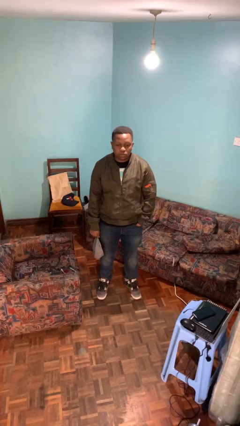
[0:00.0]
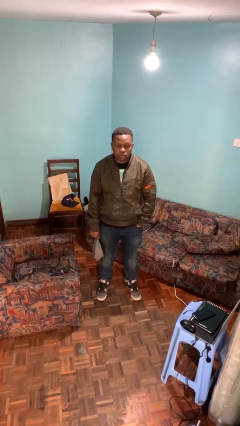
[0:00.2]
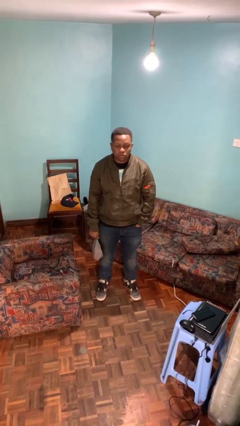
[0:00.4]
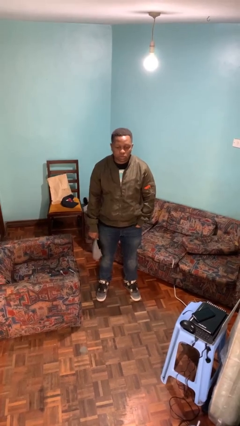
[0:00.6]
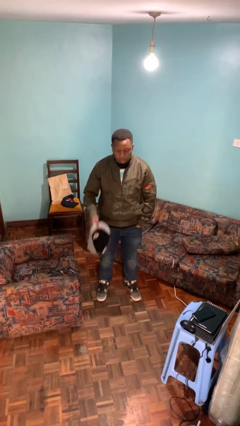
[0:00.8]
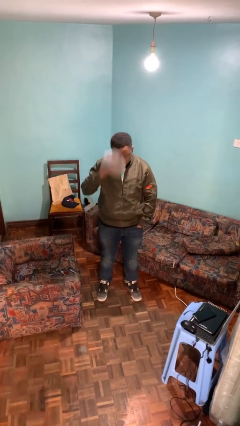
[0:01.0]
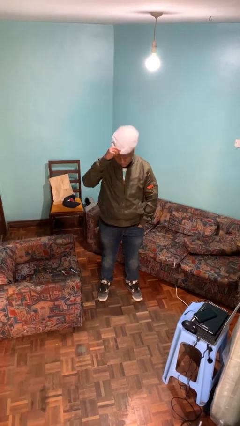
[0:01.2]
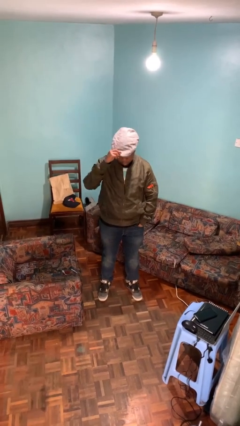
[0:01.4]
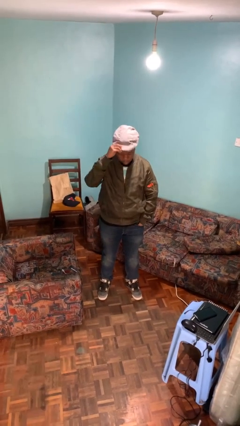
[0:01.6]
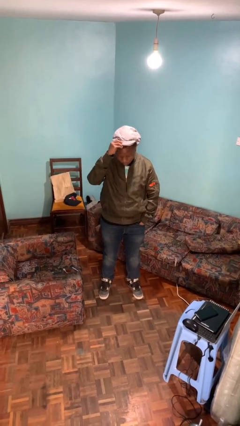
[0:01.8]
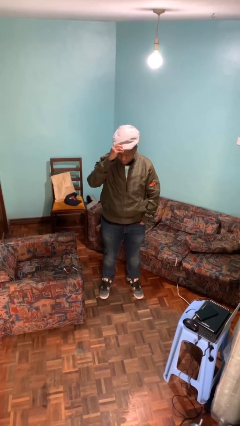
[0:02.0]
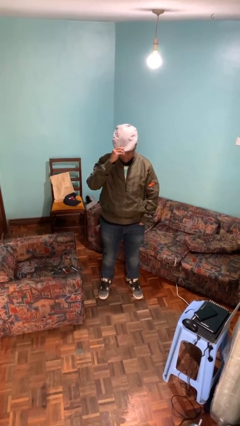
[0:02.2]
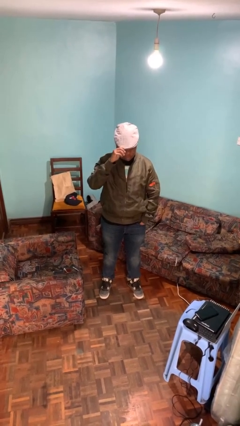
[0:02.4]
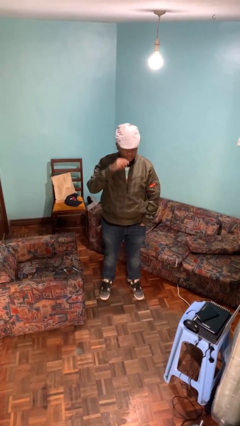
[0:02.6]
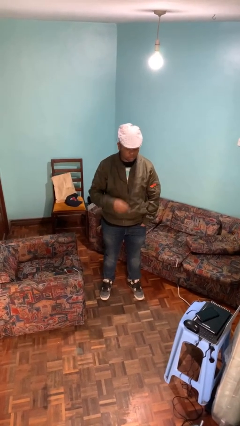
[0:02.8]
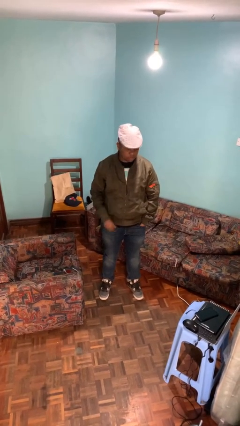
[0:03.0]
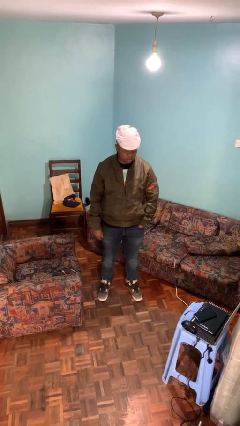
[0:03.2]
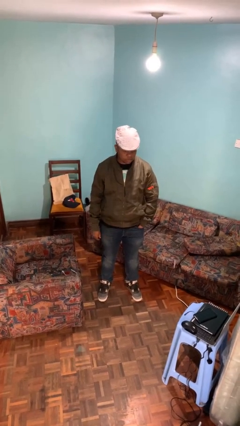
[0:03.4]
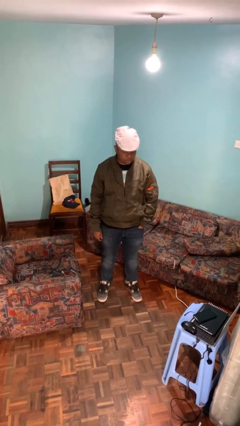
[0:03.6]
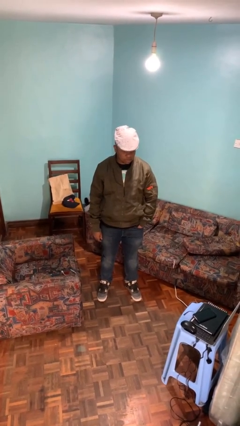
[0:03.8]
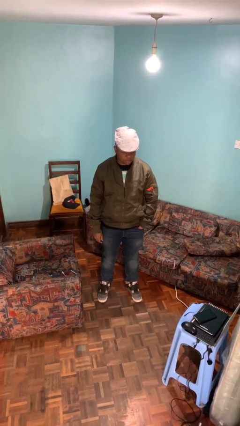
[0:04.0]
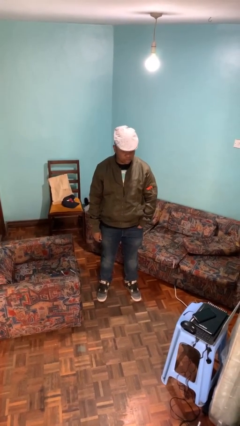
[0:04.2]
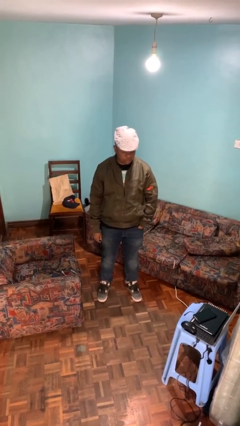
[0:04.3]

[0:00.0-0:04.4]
person puts on hat

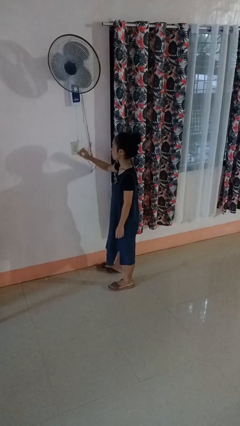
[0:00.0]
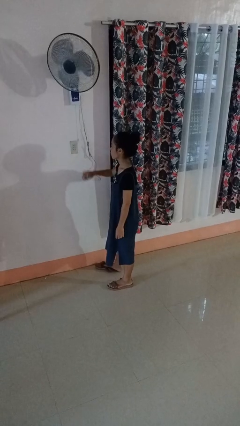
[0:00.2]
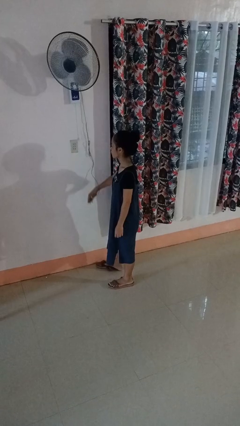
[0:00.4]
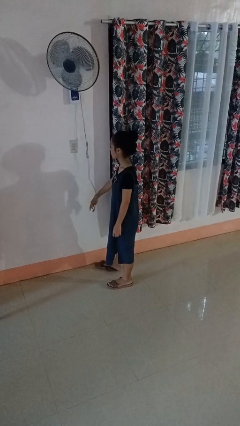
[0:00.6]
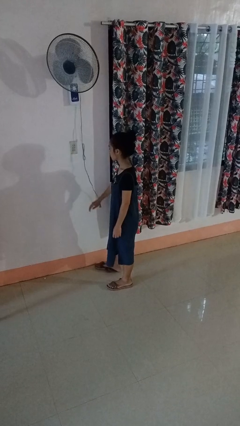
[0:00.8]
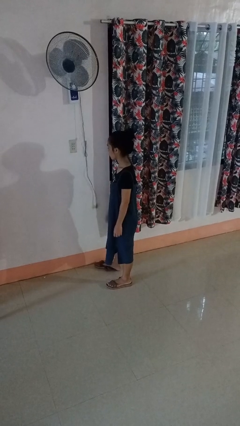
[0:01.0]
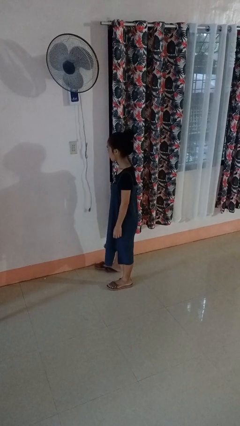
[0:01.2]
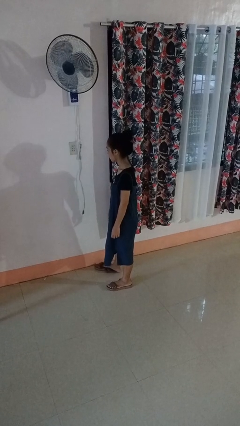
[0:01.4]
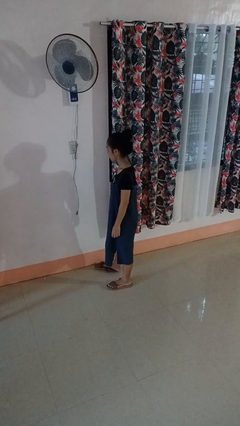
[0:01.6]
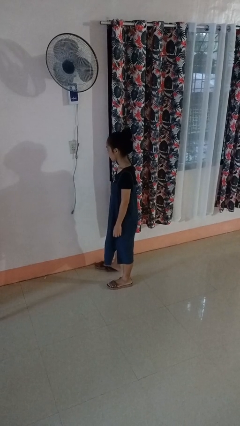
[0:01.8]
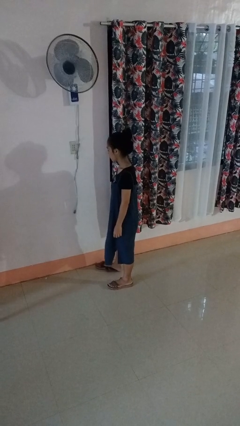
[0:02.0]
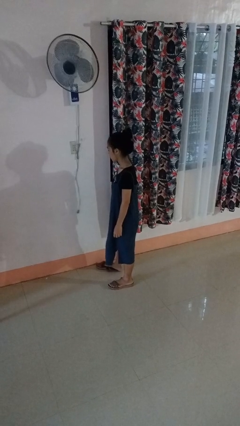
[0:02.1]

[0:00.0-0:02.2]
person unplugs from electrical socket

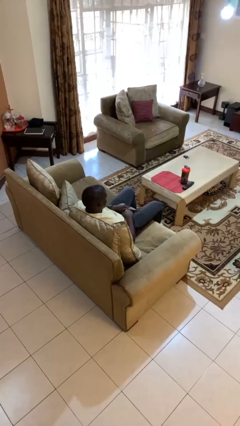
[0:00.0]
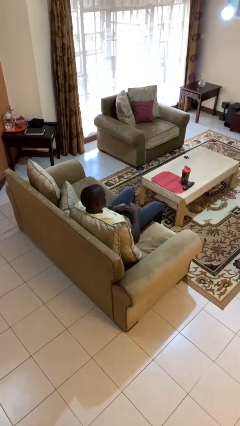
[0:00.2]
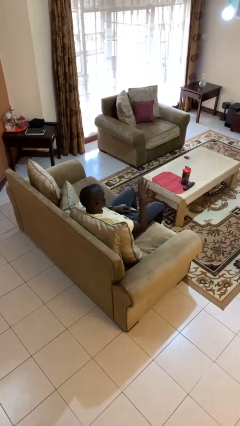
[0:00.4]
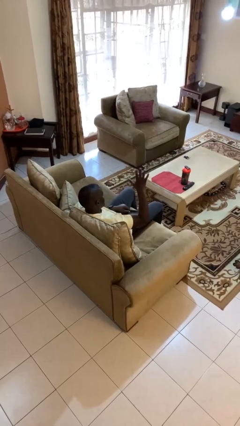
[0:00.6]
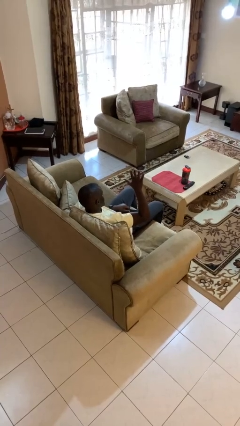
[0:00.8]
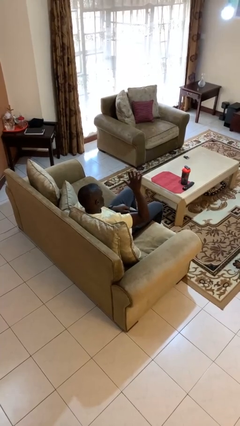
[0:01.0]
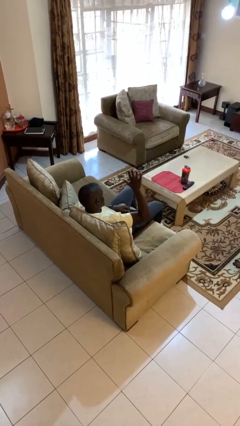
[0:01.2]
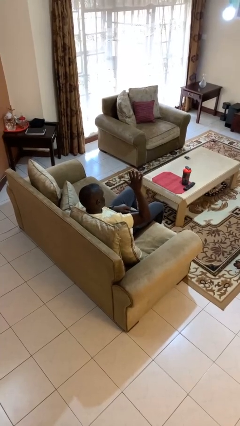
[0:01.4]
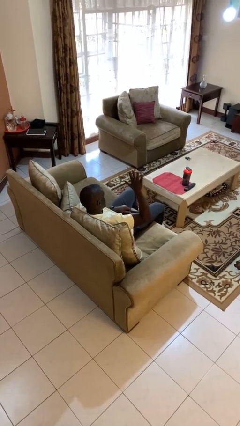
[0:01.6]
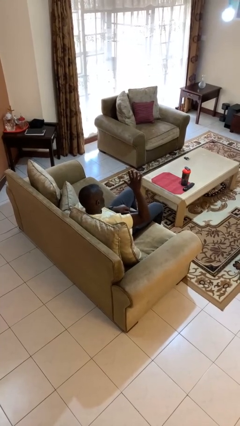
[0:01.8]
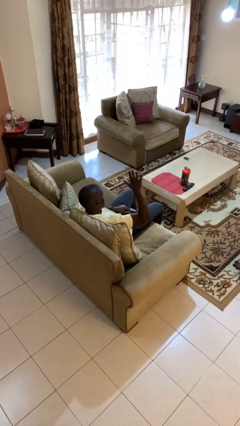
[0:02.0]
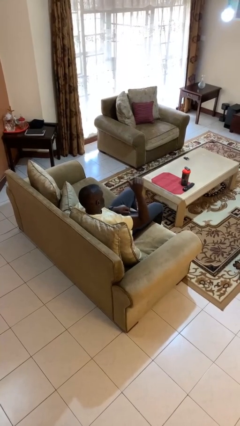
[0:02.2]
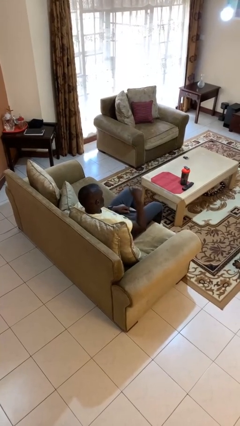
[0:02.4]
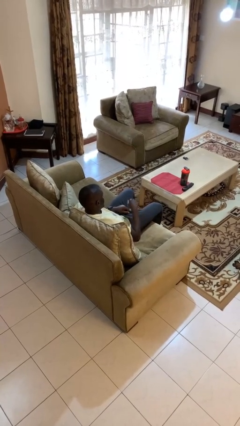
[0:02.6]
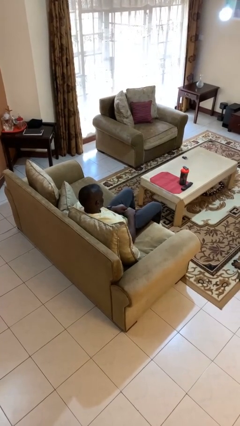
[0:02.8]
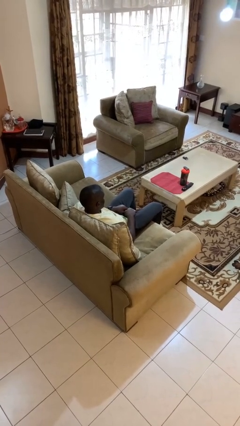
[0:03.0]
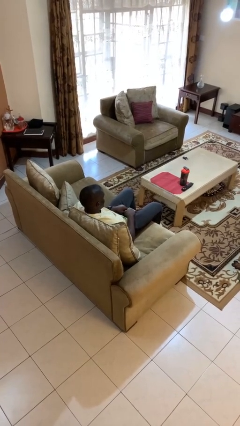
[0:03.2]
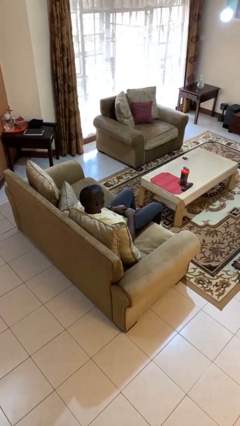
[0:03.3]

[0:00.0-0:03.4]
person gestures number five

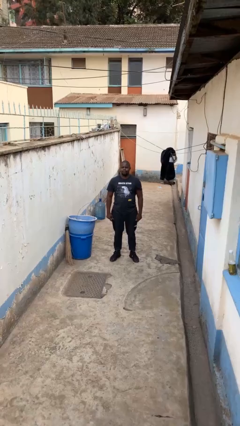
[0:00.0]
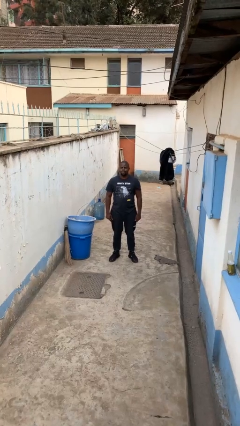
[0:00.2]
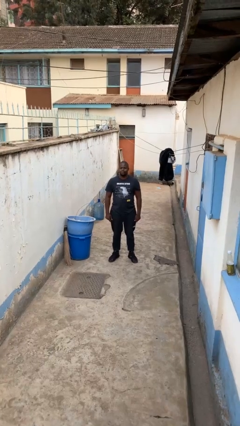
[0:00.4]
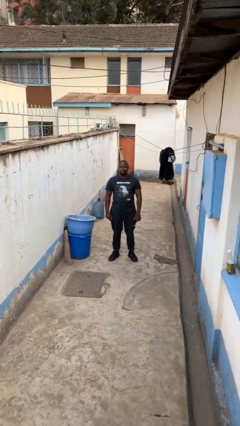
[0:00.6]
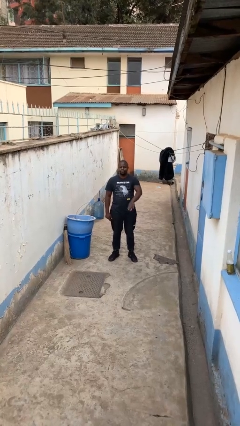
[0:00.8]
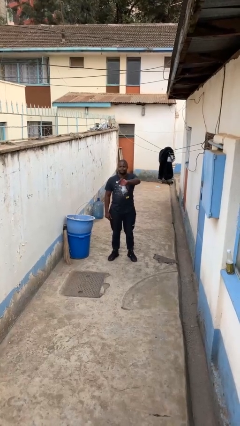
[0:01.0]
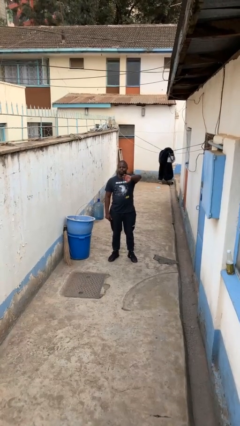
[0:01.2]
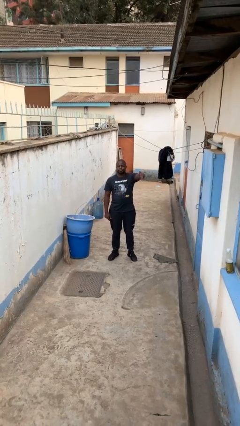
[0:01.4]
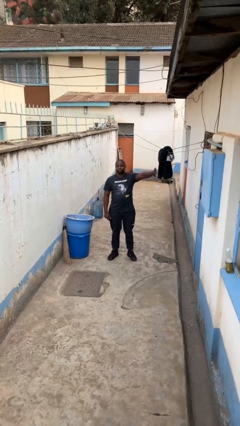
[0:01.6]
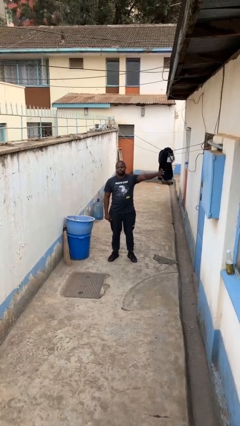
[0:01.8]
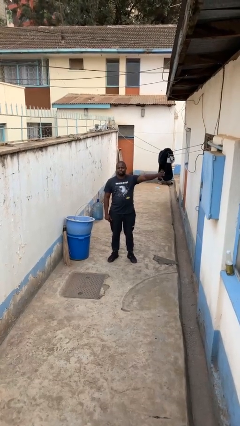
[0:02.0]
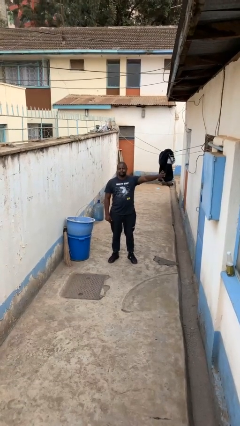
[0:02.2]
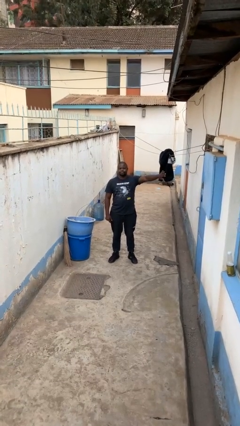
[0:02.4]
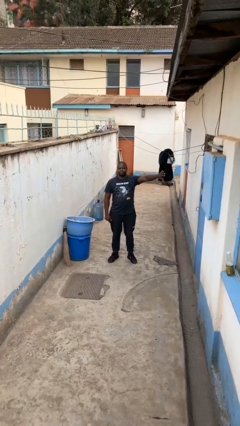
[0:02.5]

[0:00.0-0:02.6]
person gestures swipe left

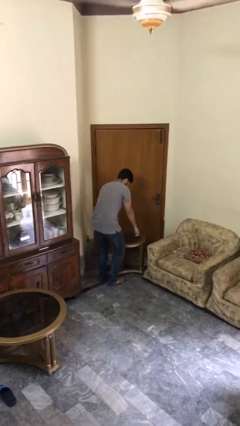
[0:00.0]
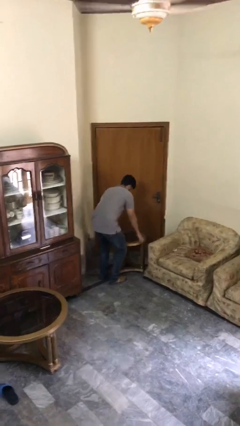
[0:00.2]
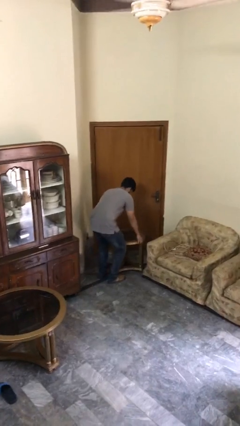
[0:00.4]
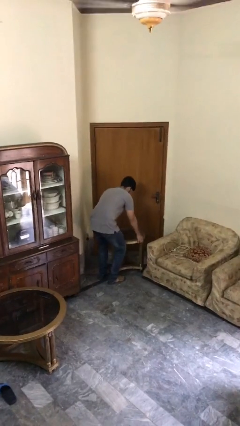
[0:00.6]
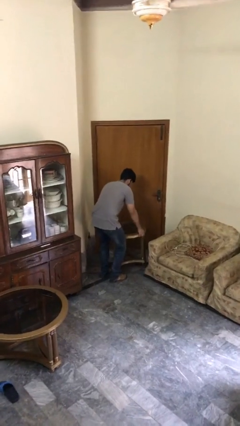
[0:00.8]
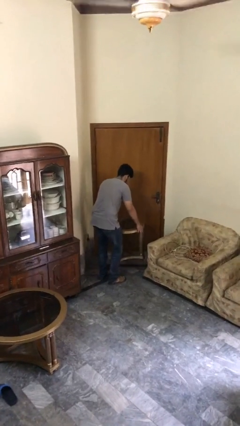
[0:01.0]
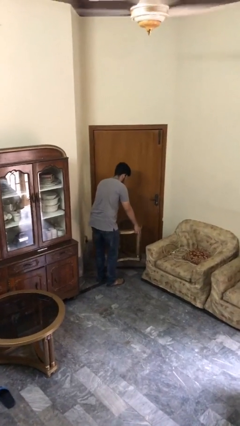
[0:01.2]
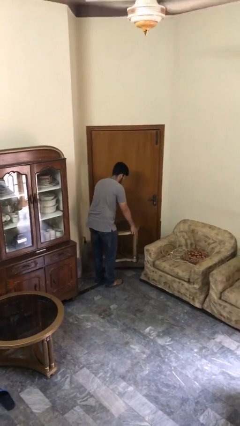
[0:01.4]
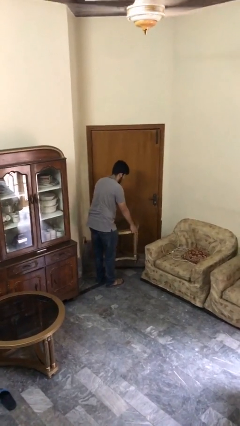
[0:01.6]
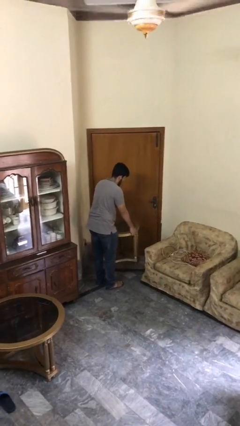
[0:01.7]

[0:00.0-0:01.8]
person picks up object from floor

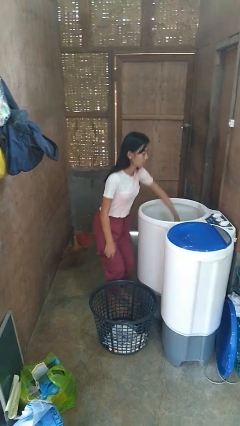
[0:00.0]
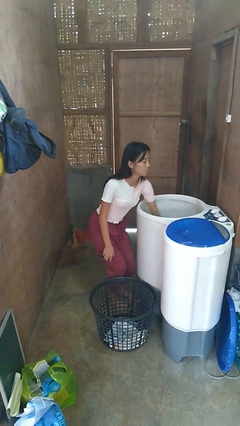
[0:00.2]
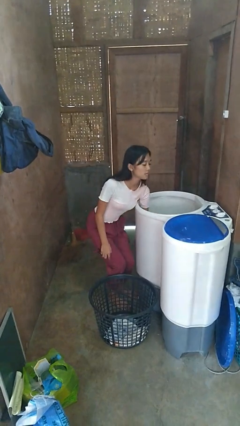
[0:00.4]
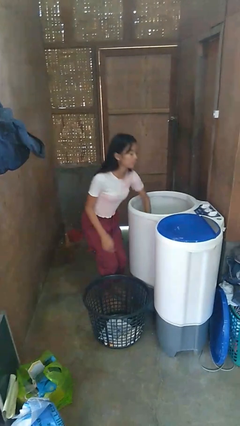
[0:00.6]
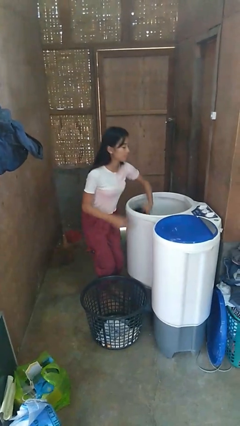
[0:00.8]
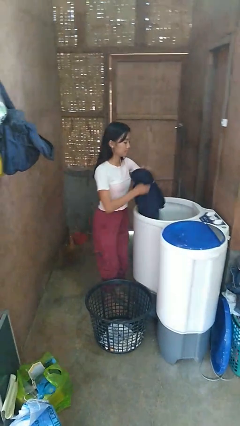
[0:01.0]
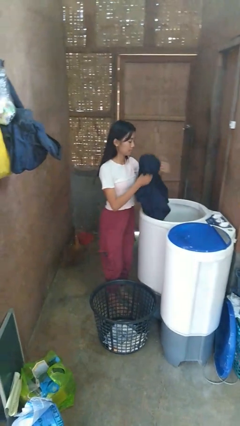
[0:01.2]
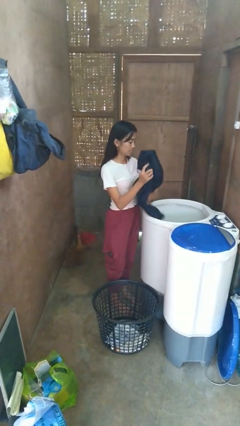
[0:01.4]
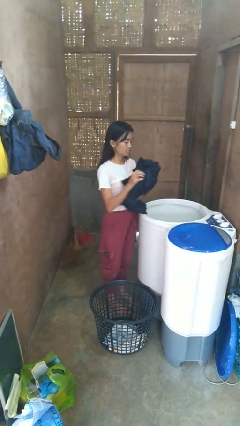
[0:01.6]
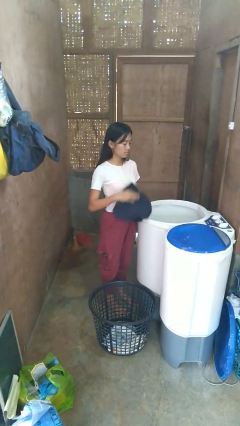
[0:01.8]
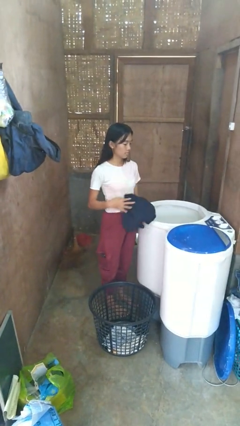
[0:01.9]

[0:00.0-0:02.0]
person unloads clotheswasher

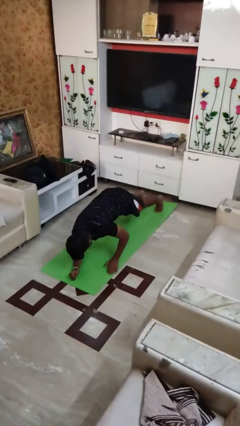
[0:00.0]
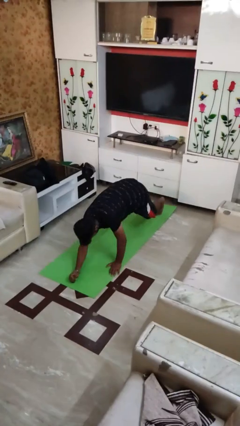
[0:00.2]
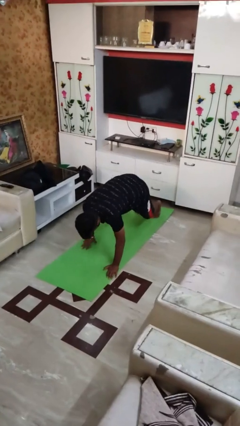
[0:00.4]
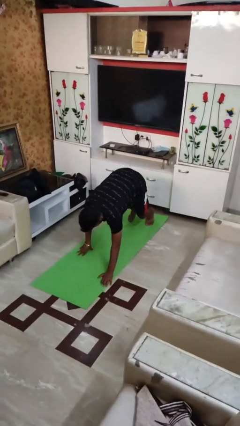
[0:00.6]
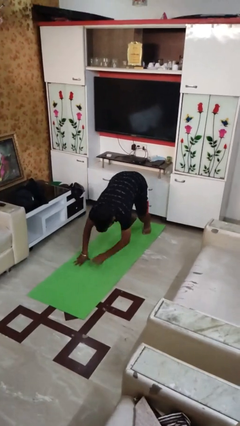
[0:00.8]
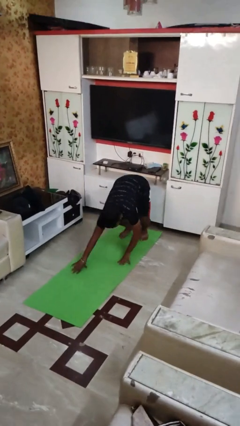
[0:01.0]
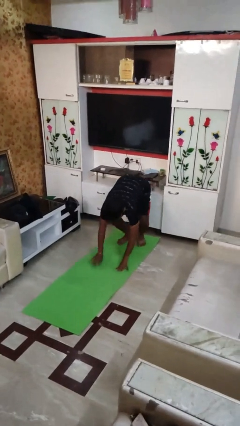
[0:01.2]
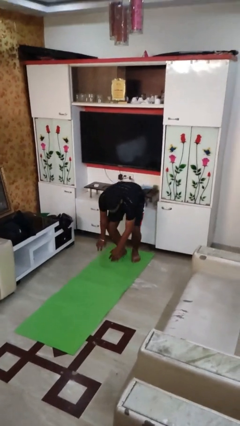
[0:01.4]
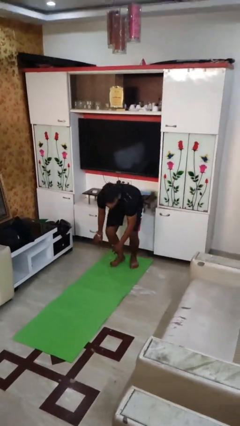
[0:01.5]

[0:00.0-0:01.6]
person stands up from floor
